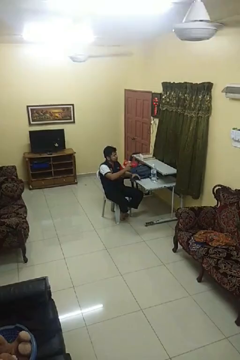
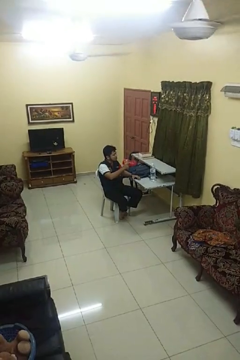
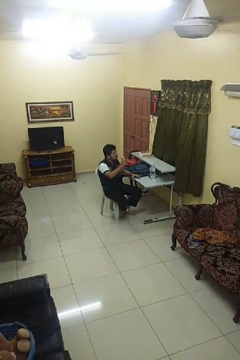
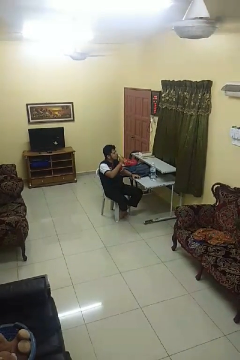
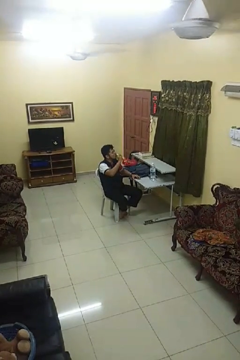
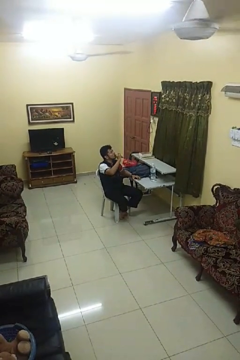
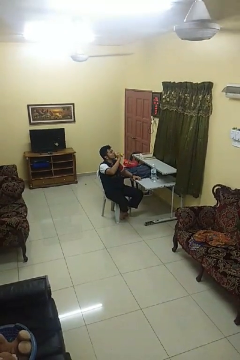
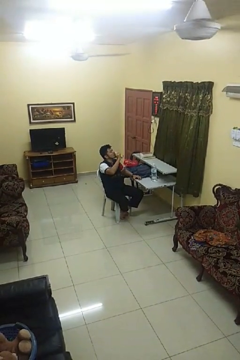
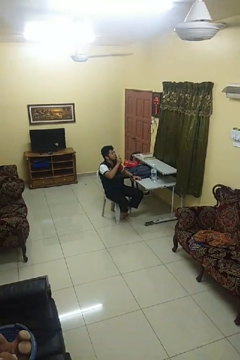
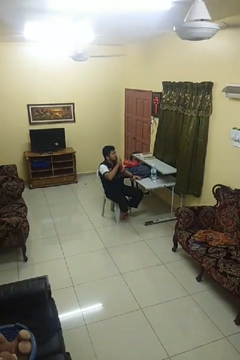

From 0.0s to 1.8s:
person drinks from beverage can

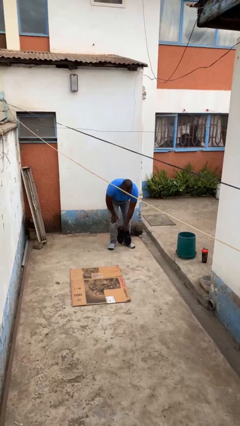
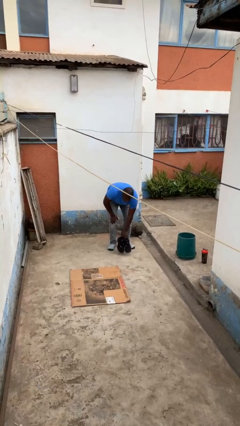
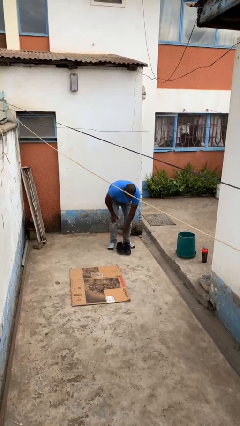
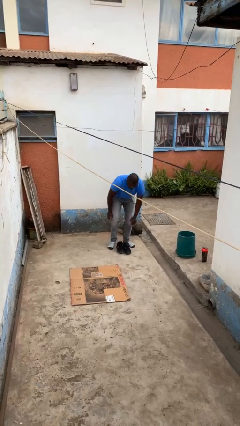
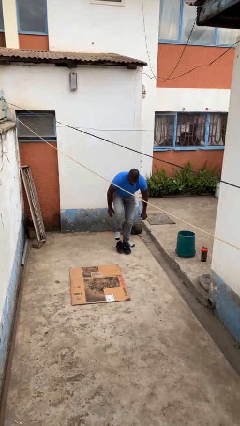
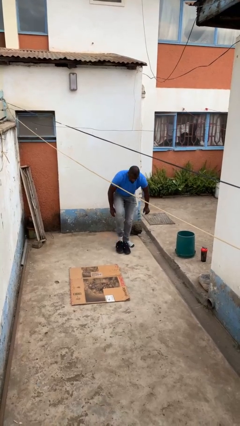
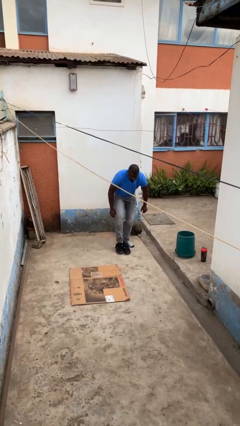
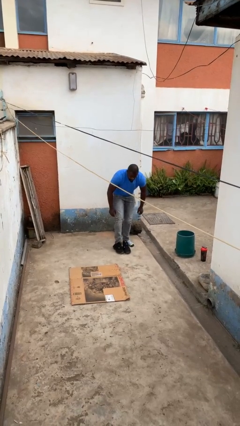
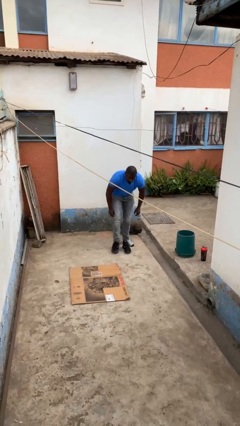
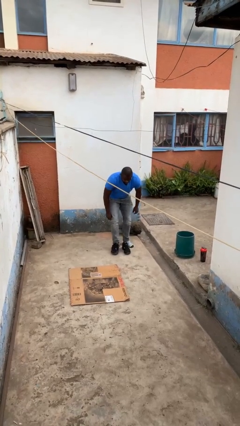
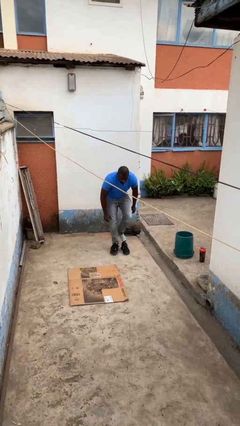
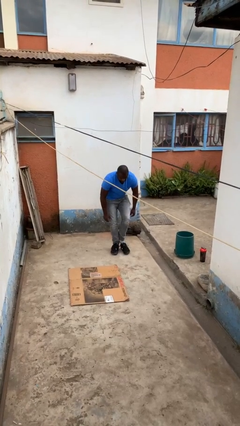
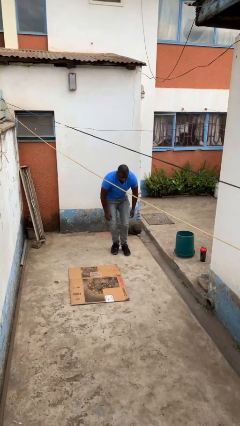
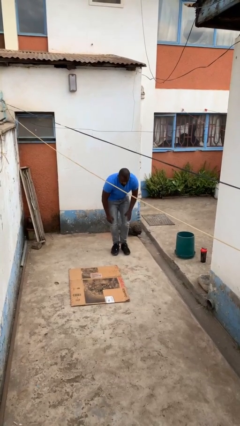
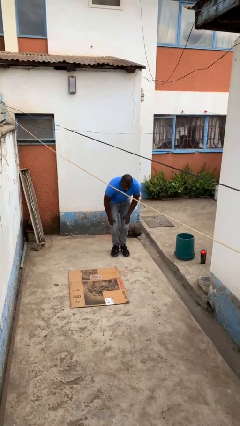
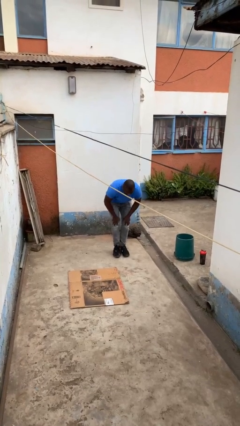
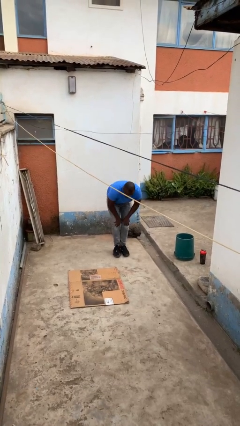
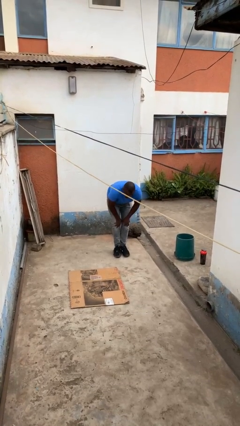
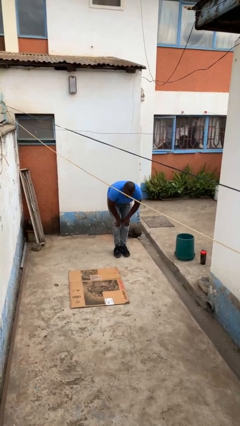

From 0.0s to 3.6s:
person puts on shoes

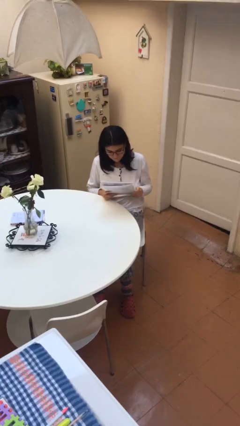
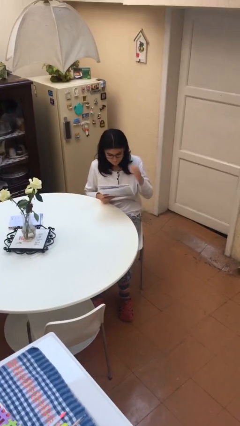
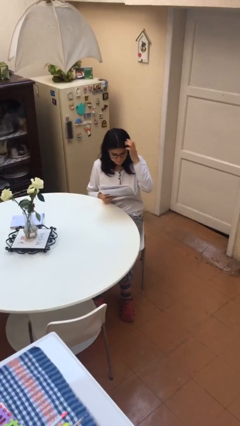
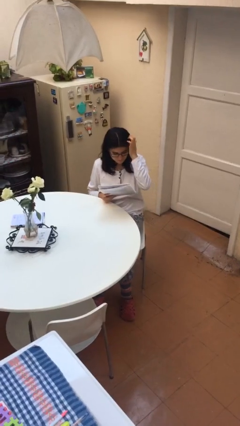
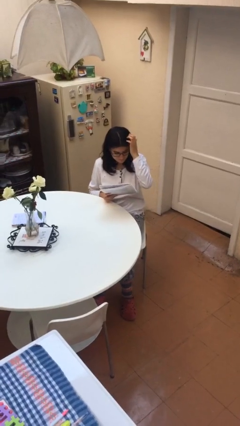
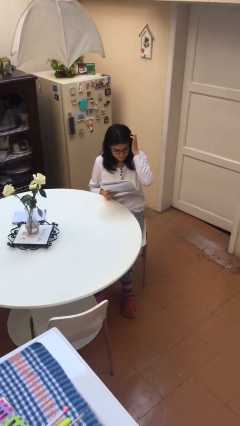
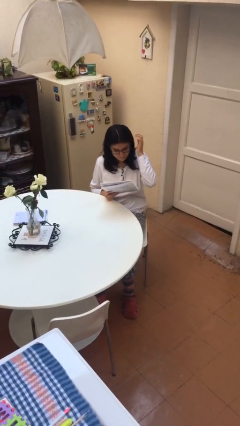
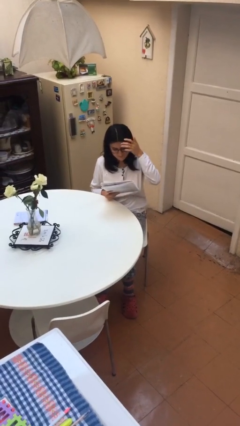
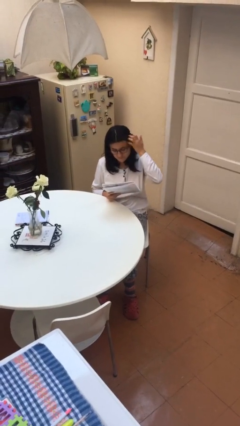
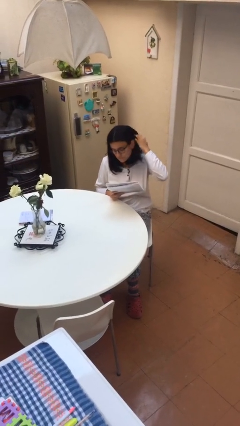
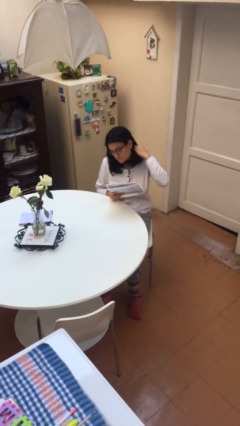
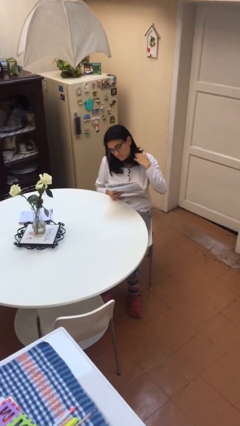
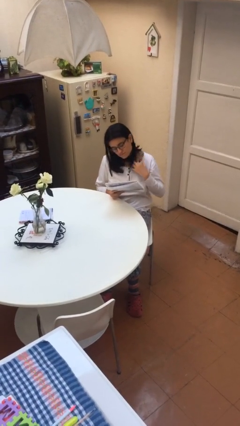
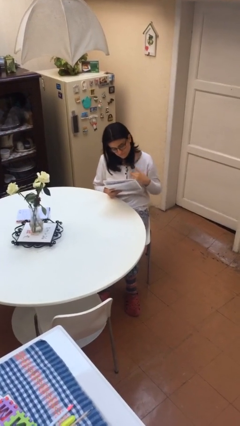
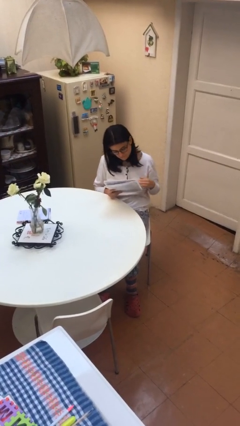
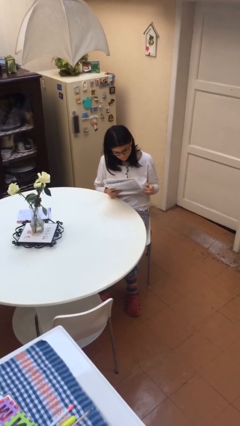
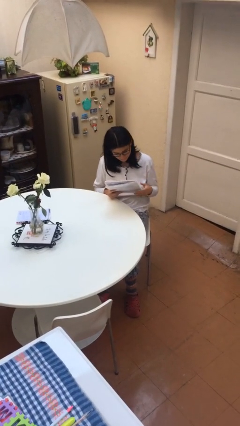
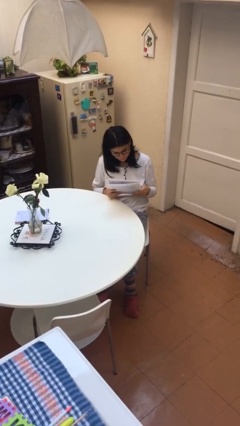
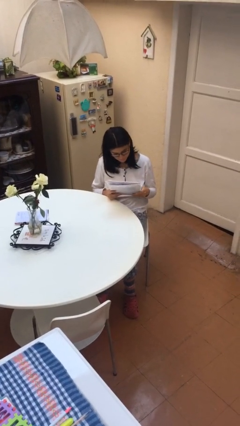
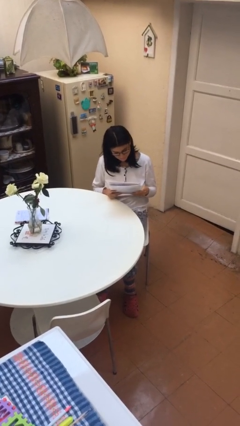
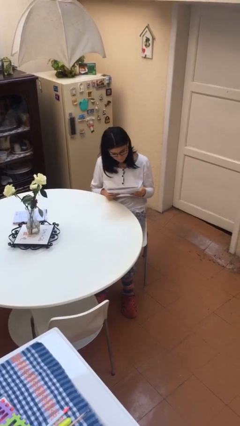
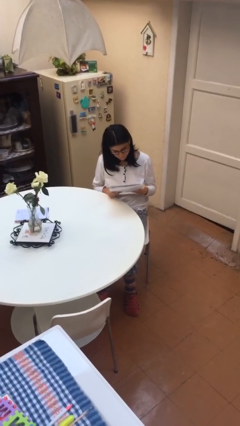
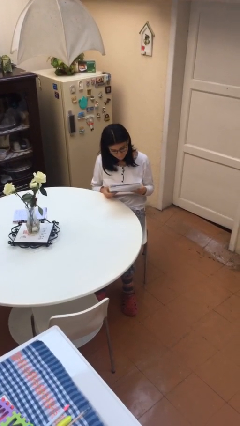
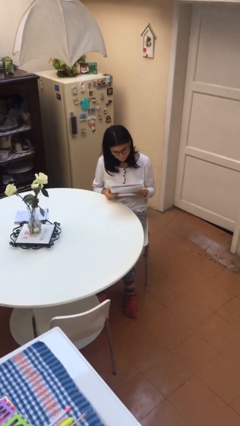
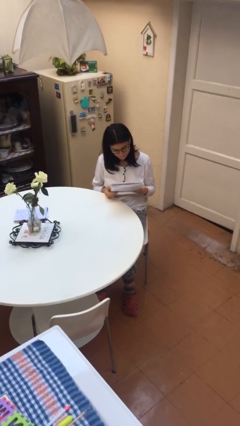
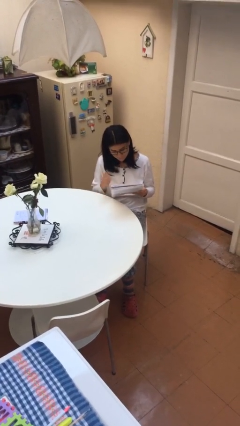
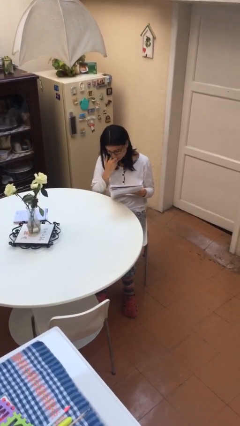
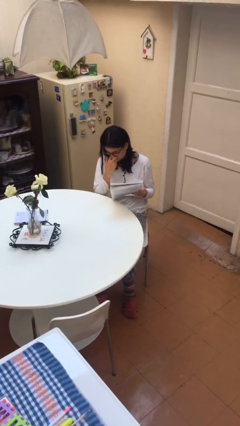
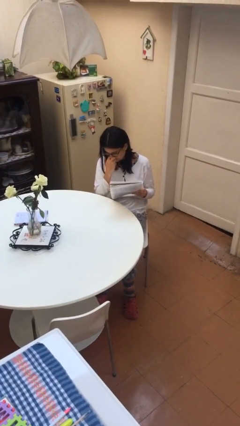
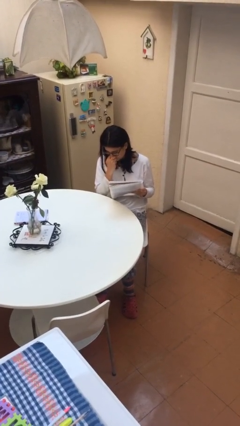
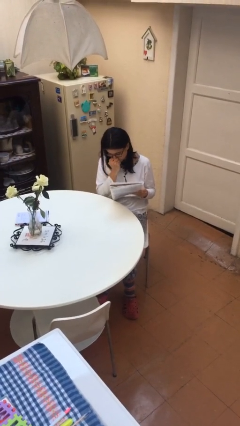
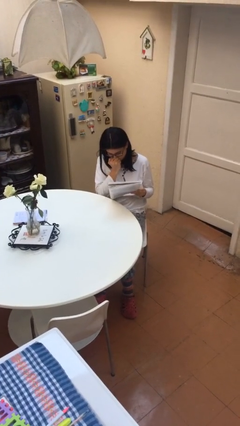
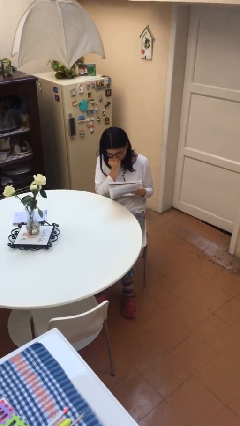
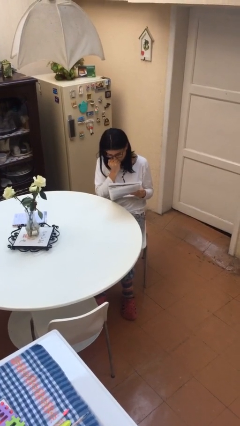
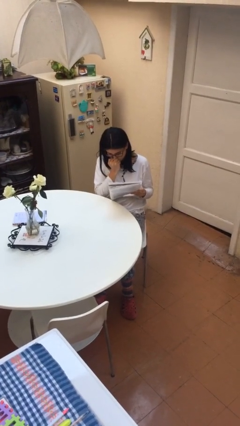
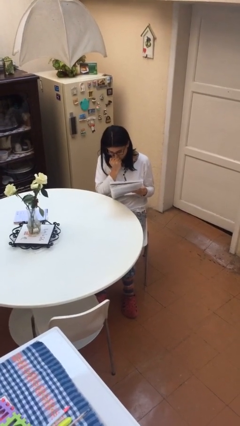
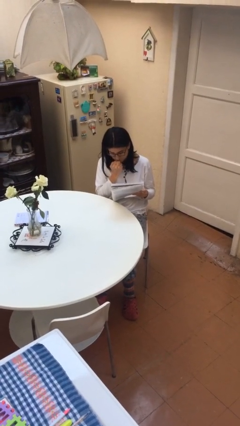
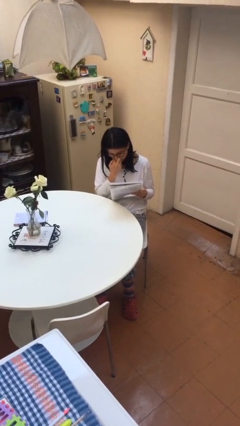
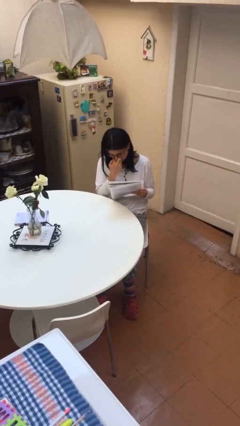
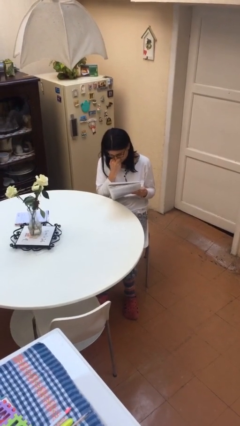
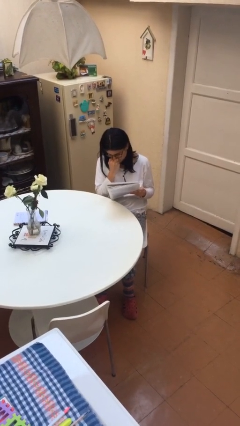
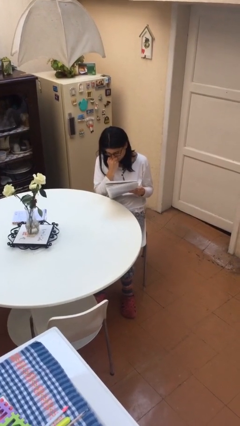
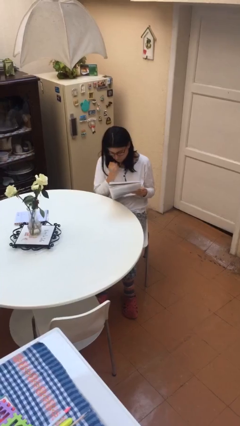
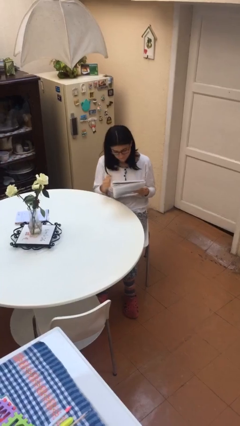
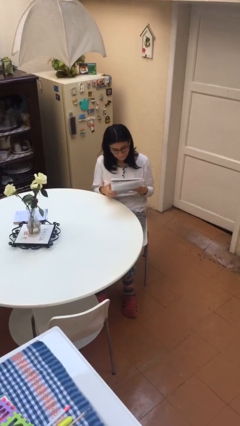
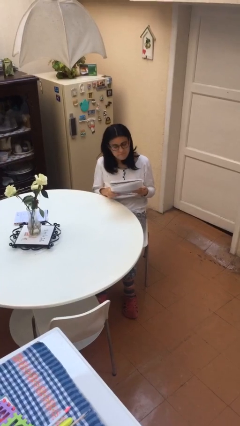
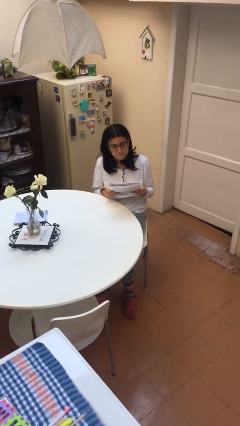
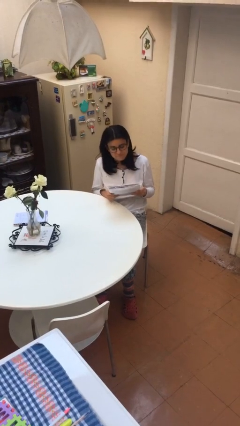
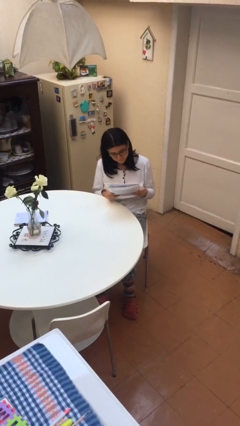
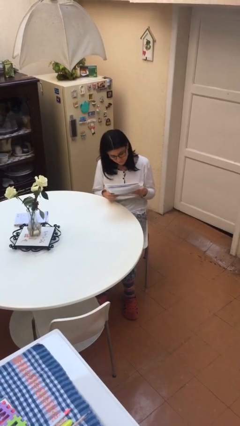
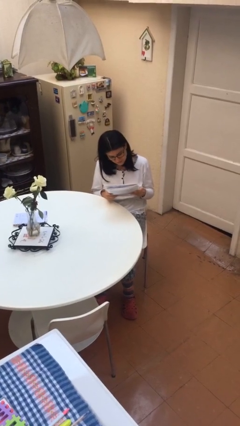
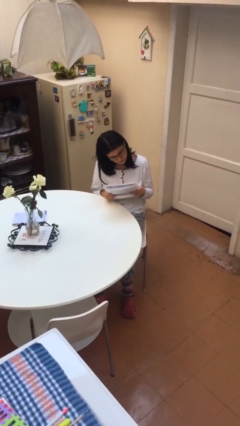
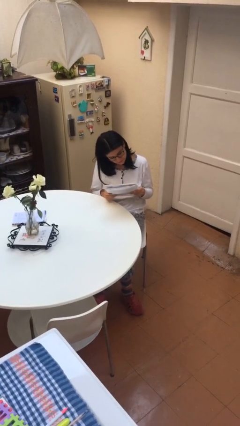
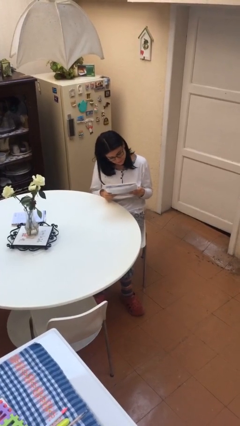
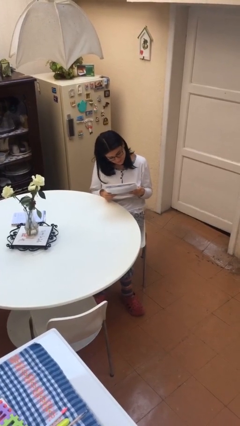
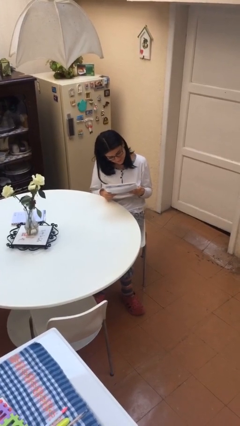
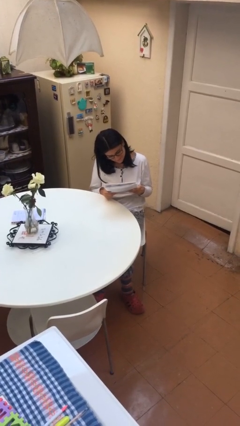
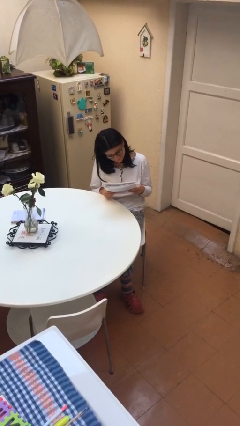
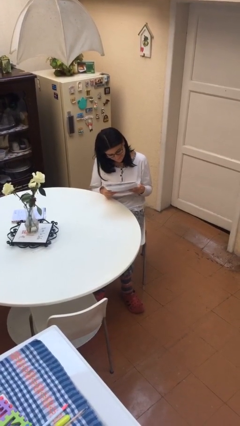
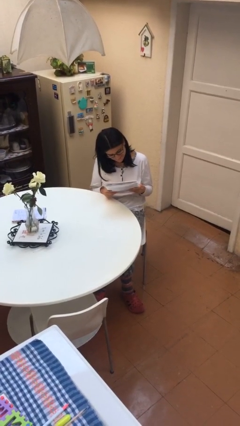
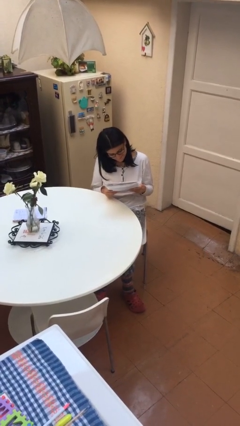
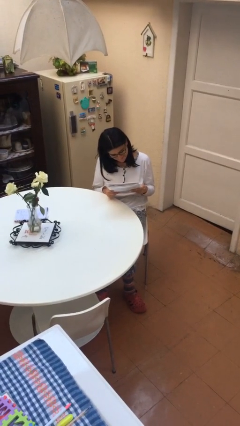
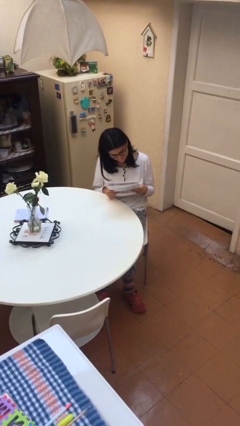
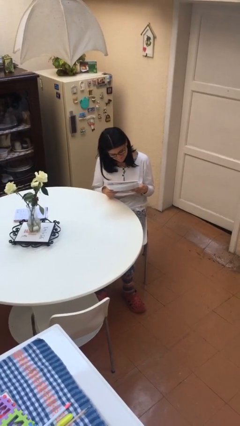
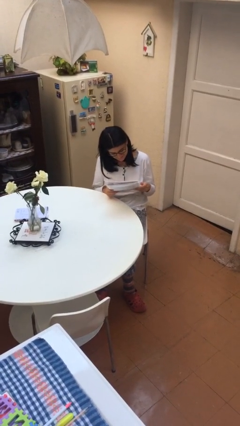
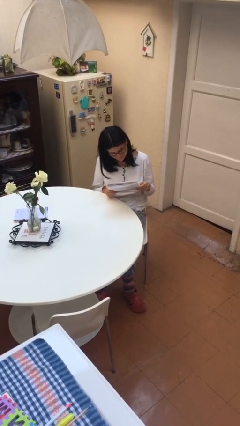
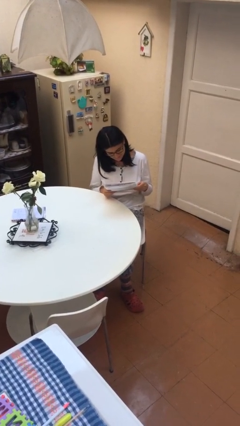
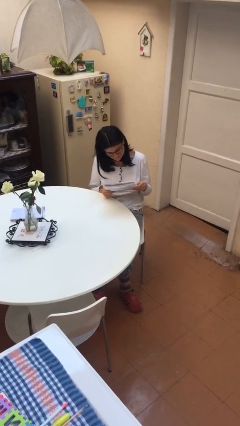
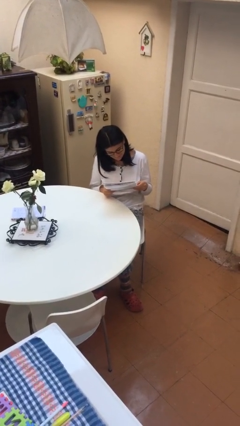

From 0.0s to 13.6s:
person reads document
